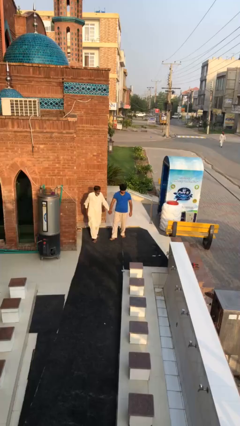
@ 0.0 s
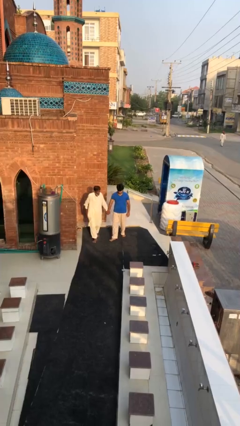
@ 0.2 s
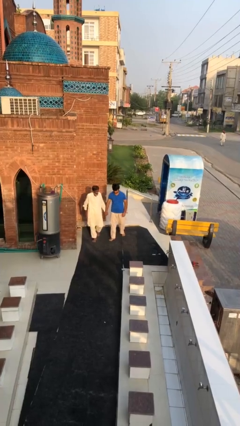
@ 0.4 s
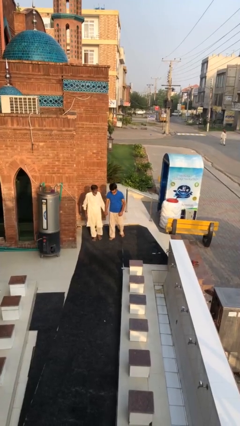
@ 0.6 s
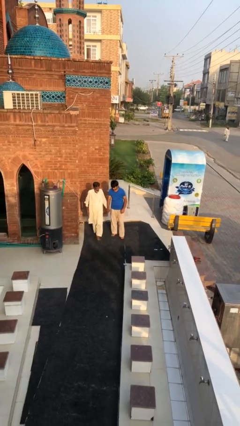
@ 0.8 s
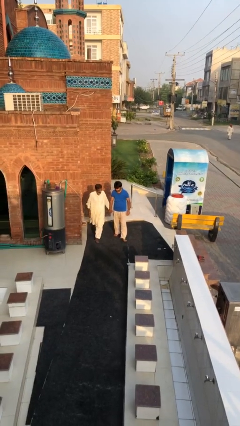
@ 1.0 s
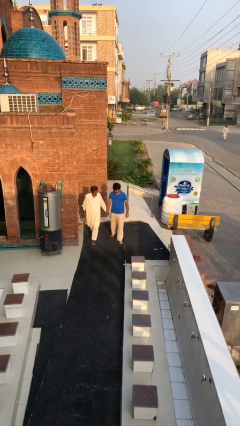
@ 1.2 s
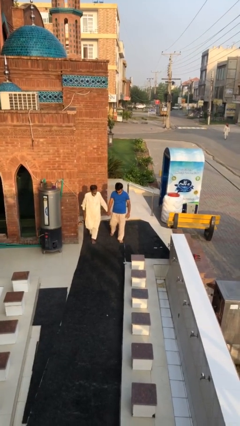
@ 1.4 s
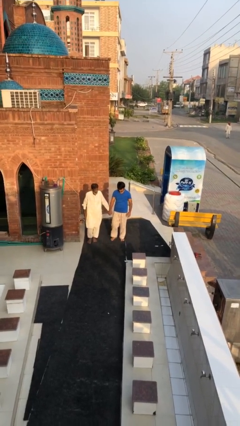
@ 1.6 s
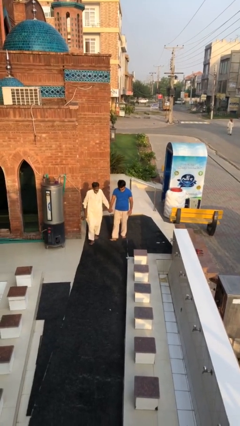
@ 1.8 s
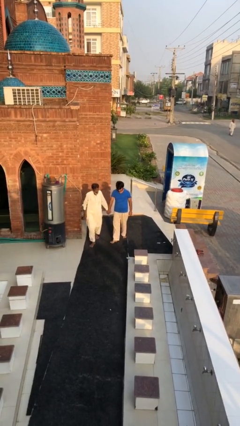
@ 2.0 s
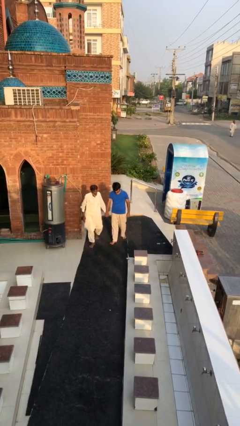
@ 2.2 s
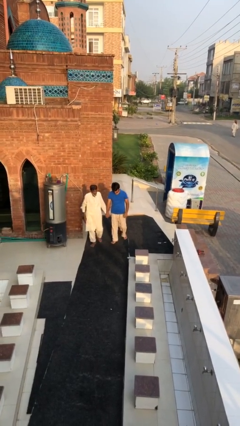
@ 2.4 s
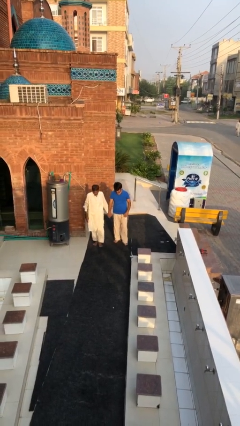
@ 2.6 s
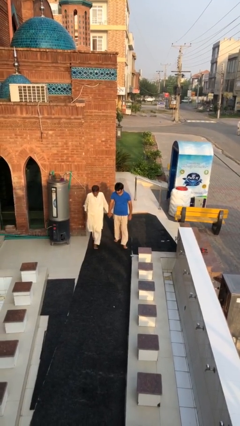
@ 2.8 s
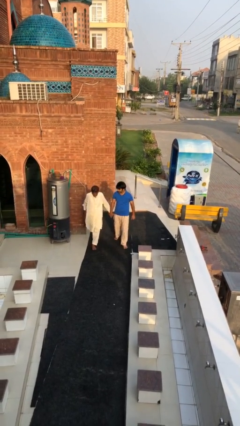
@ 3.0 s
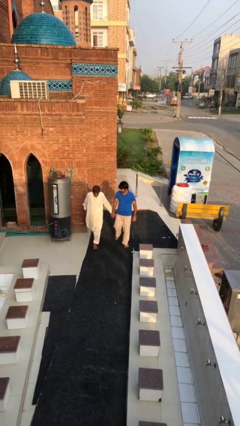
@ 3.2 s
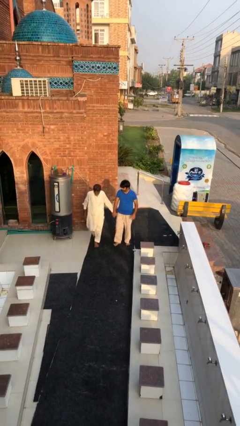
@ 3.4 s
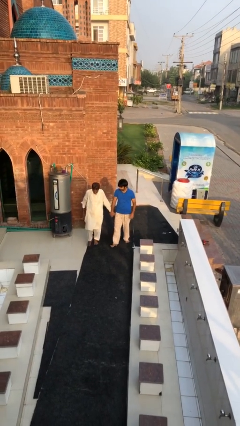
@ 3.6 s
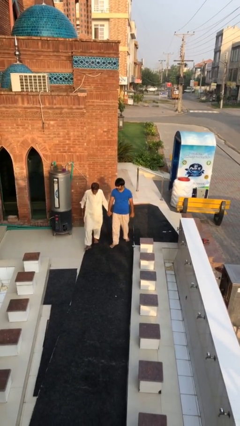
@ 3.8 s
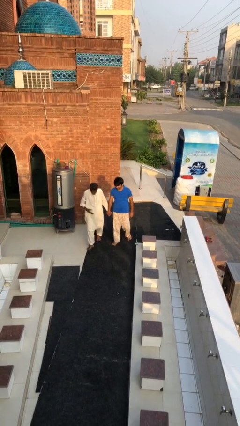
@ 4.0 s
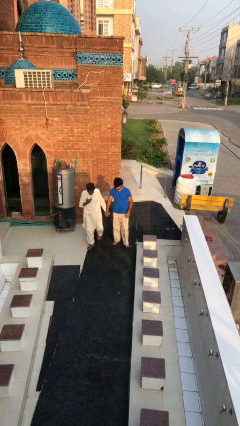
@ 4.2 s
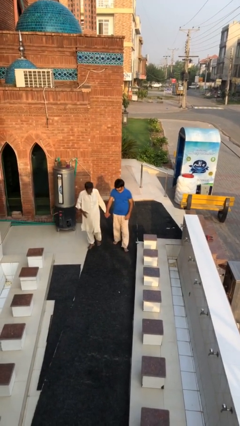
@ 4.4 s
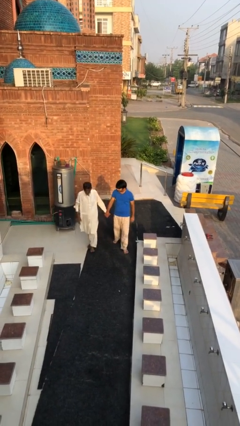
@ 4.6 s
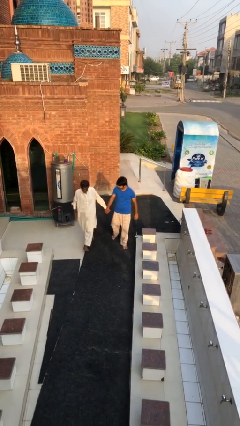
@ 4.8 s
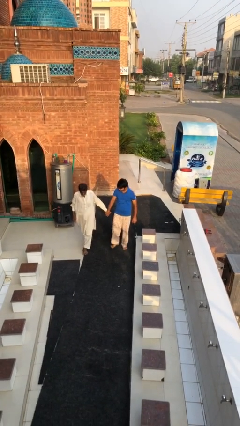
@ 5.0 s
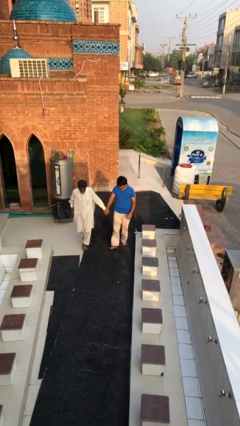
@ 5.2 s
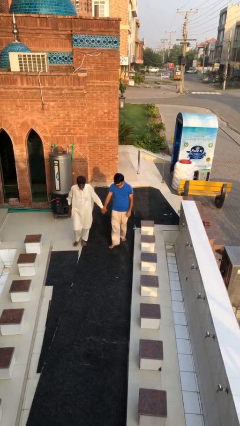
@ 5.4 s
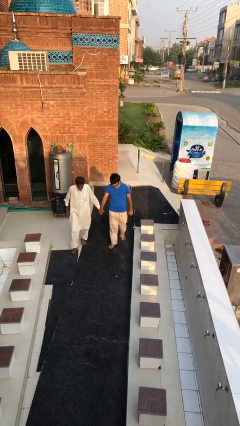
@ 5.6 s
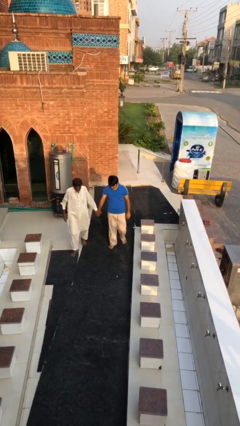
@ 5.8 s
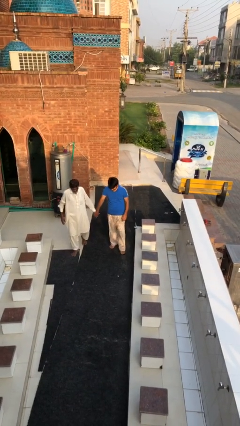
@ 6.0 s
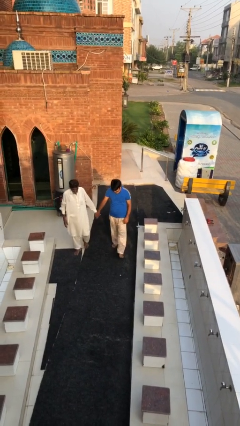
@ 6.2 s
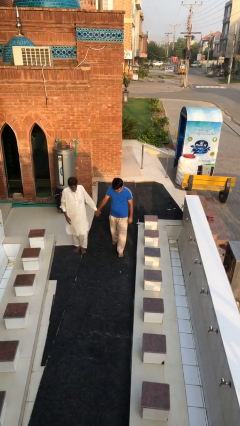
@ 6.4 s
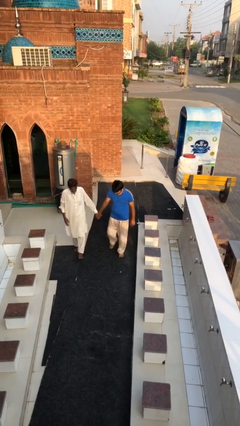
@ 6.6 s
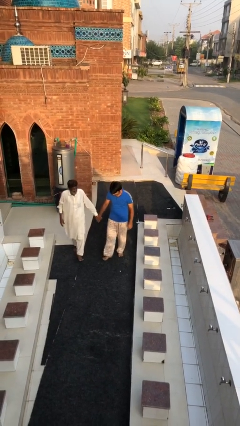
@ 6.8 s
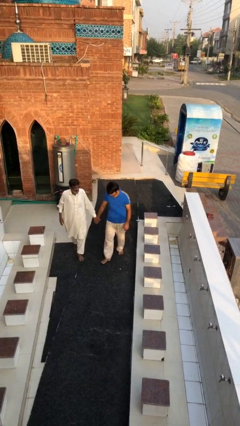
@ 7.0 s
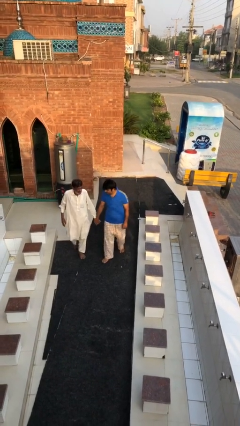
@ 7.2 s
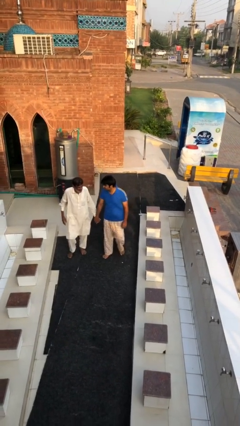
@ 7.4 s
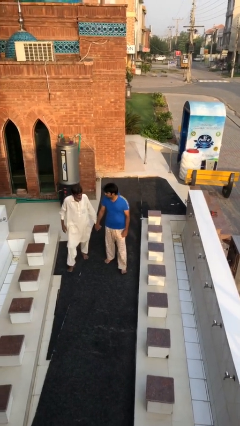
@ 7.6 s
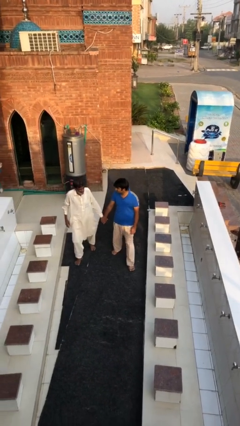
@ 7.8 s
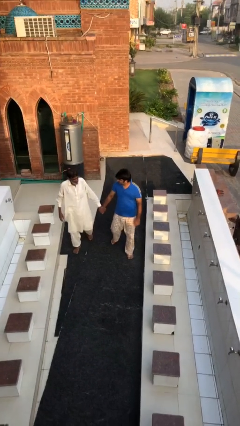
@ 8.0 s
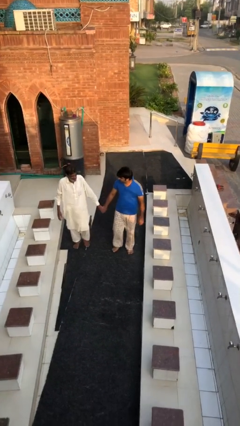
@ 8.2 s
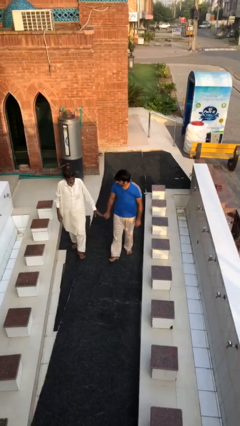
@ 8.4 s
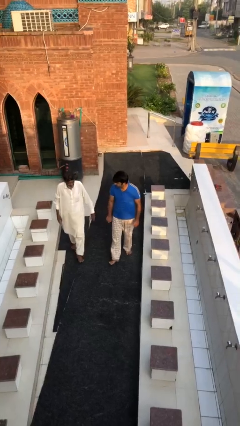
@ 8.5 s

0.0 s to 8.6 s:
person holds hand

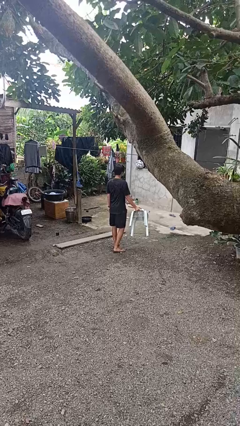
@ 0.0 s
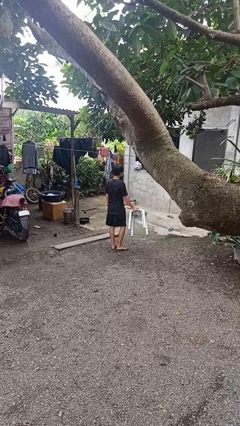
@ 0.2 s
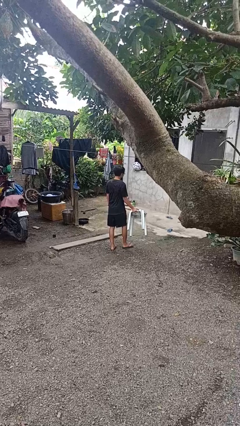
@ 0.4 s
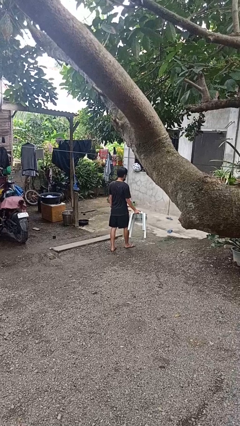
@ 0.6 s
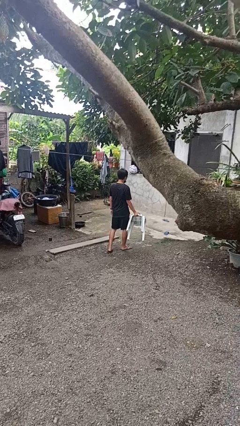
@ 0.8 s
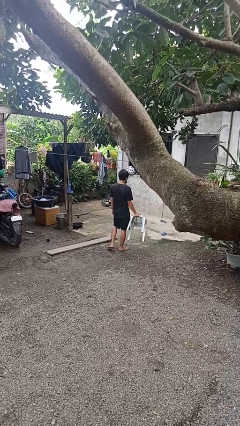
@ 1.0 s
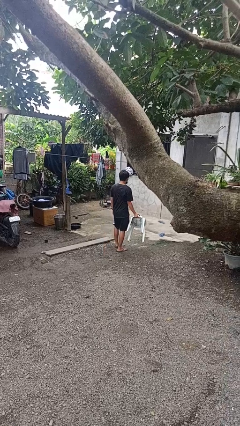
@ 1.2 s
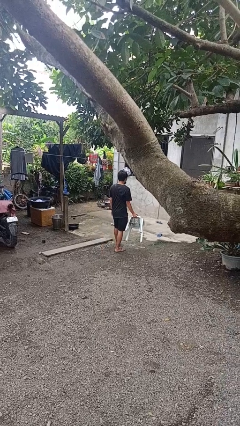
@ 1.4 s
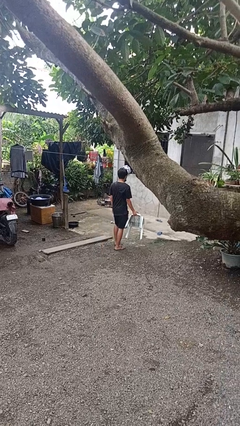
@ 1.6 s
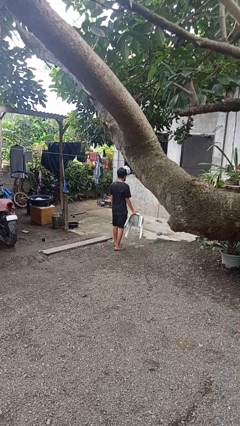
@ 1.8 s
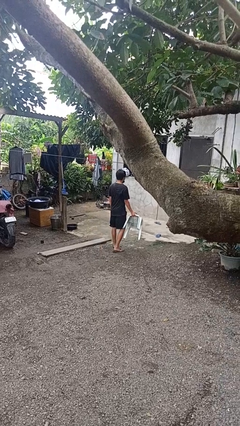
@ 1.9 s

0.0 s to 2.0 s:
person carries furniture

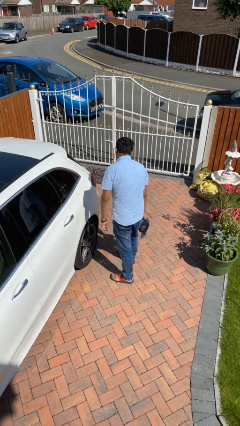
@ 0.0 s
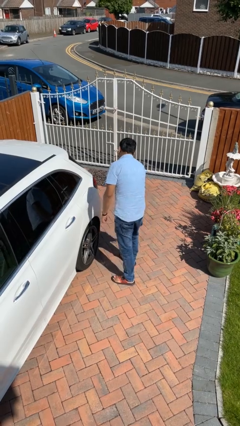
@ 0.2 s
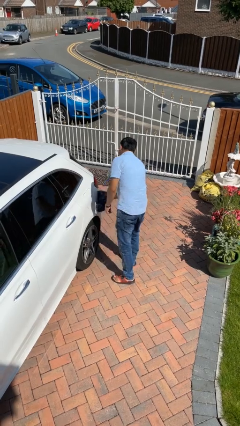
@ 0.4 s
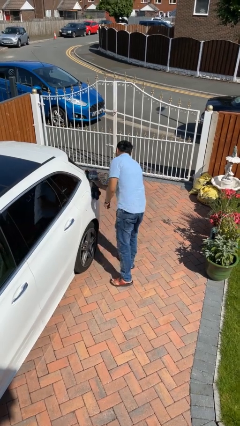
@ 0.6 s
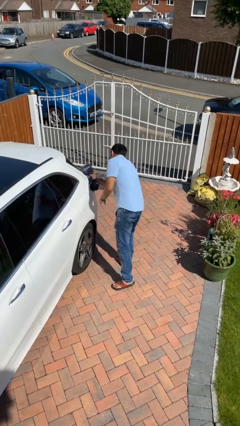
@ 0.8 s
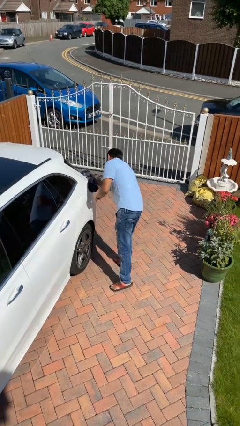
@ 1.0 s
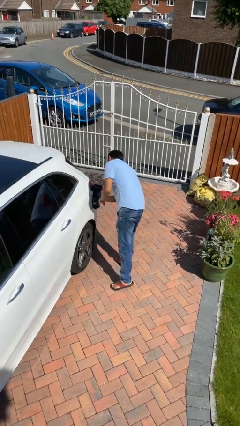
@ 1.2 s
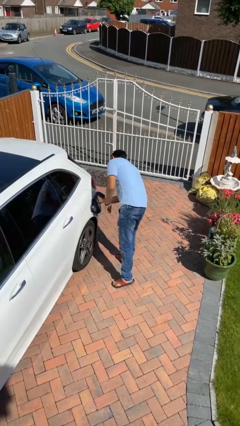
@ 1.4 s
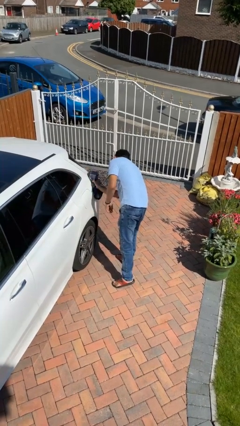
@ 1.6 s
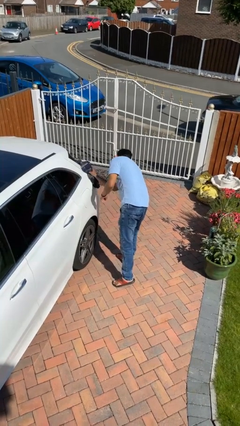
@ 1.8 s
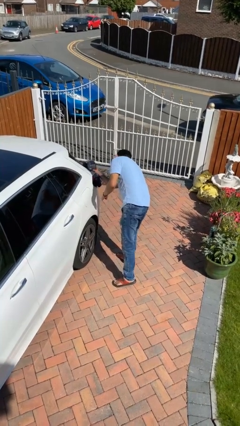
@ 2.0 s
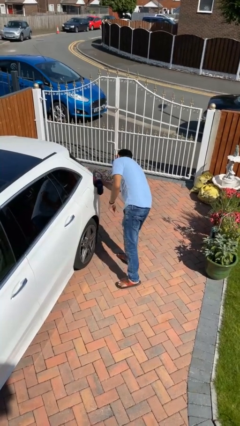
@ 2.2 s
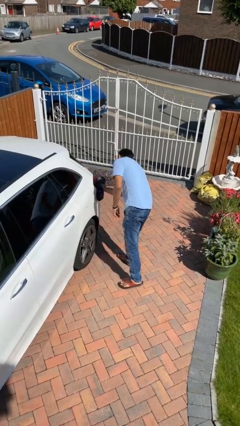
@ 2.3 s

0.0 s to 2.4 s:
person polishes car with rag

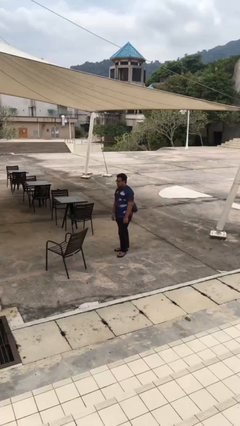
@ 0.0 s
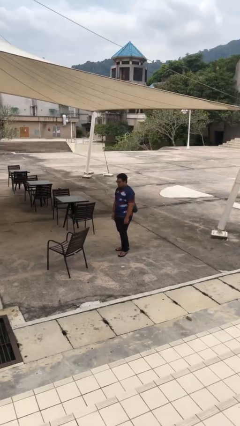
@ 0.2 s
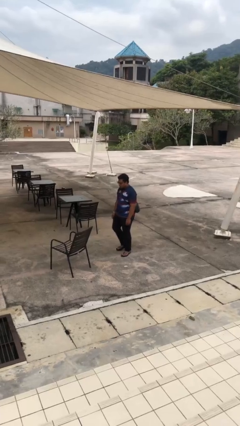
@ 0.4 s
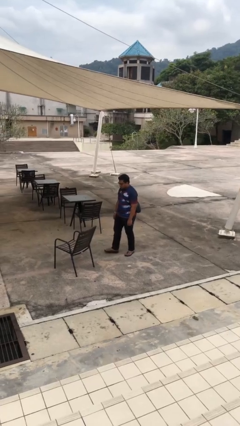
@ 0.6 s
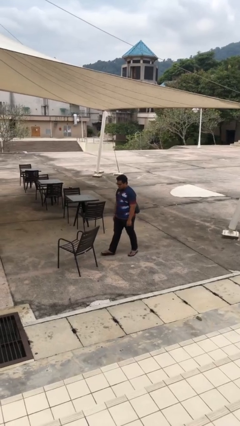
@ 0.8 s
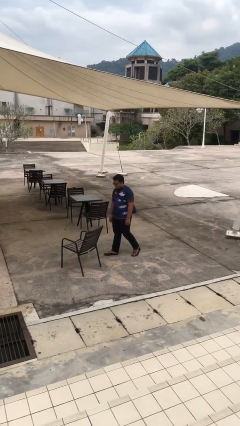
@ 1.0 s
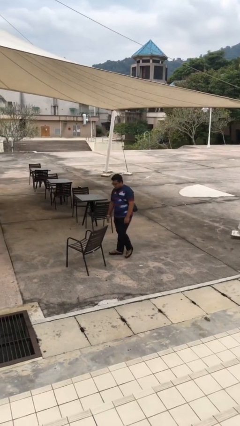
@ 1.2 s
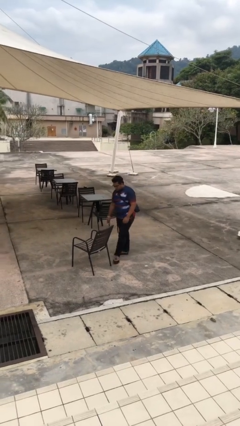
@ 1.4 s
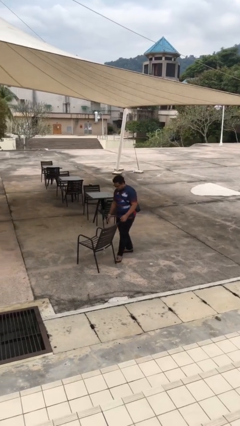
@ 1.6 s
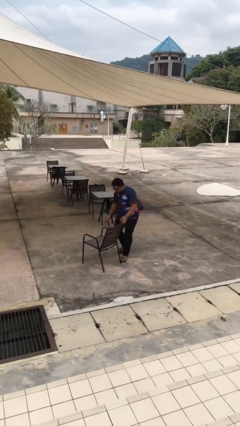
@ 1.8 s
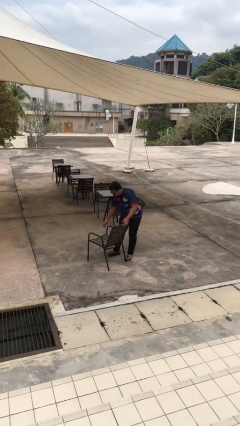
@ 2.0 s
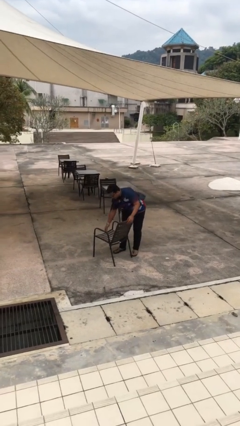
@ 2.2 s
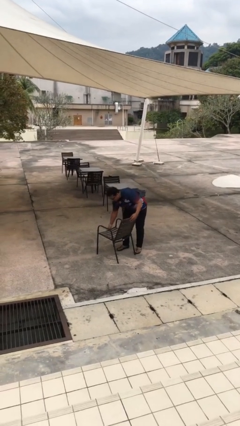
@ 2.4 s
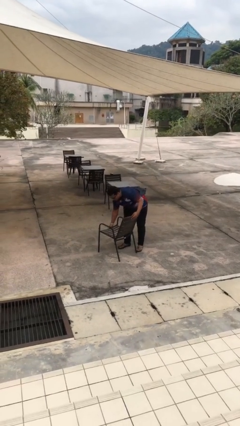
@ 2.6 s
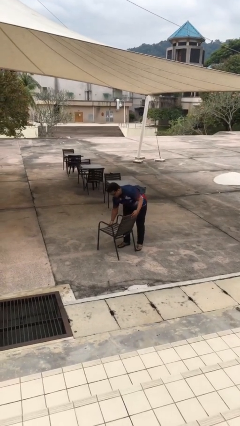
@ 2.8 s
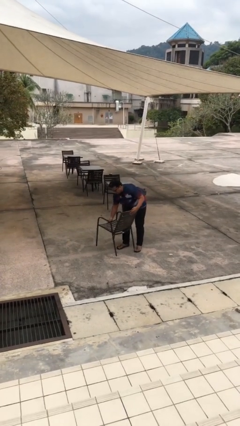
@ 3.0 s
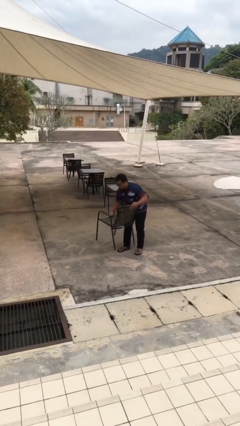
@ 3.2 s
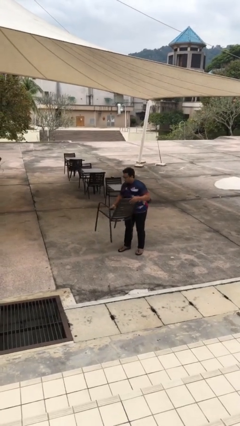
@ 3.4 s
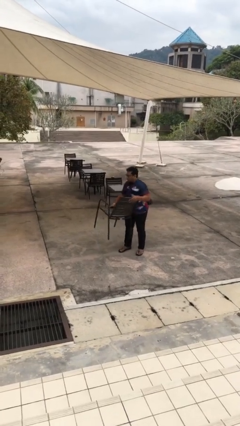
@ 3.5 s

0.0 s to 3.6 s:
person picks up object from floor

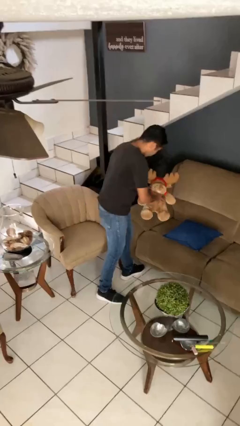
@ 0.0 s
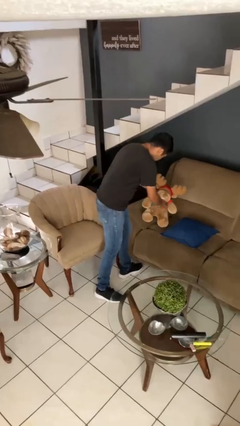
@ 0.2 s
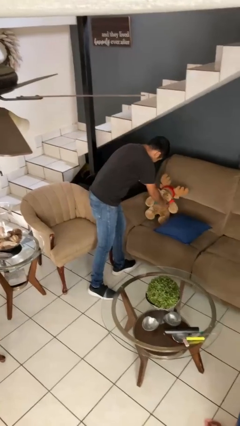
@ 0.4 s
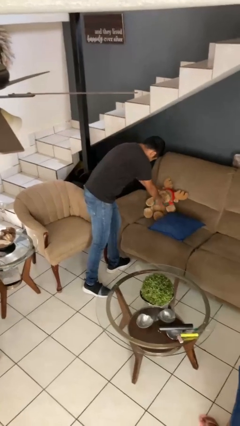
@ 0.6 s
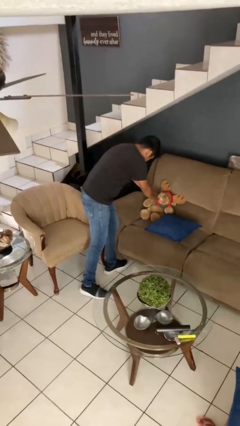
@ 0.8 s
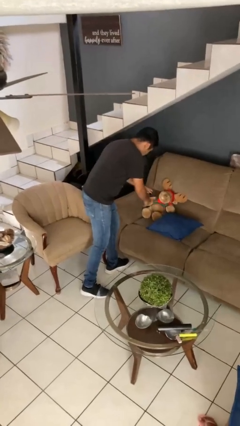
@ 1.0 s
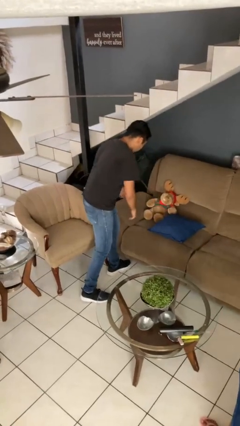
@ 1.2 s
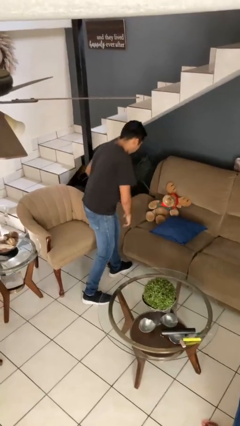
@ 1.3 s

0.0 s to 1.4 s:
person puts down object on couch
